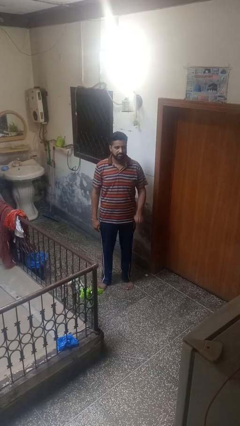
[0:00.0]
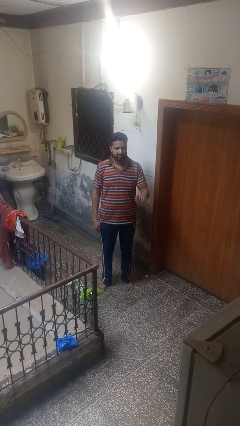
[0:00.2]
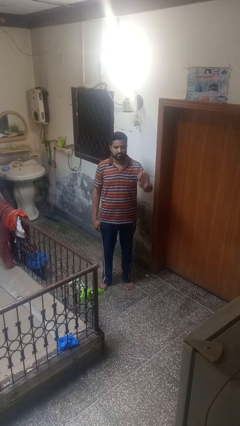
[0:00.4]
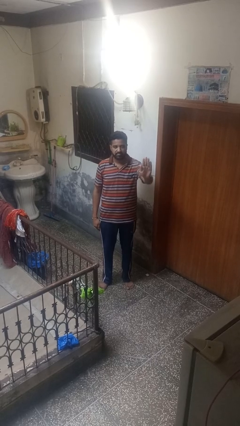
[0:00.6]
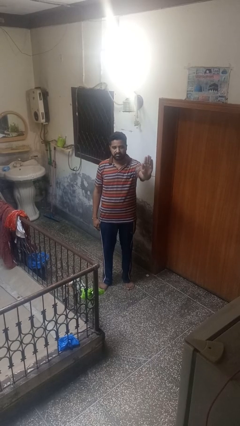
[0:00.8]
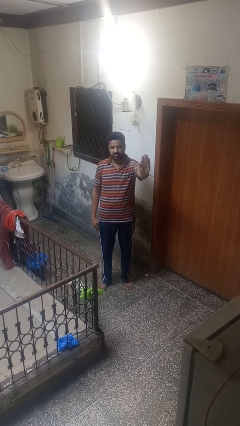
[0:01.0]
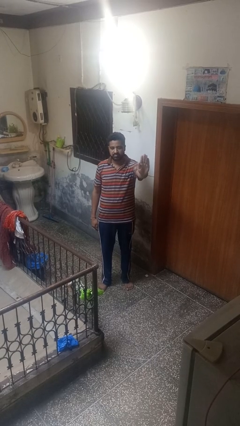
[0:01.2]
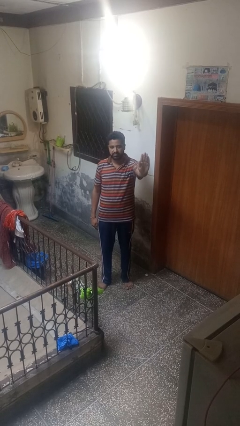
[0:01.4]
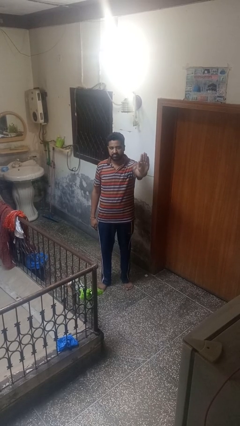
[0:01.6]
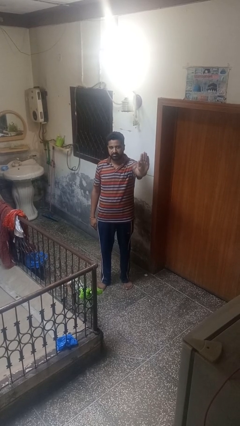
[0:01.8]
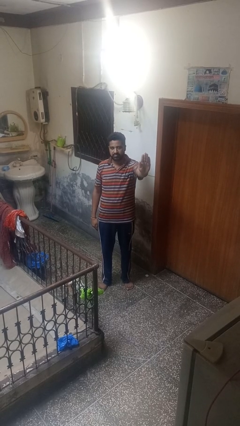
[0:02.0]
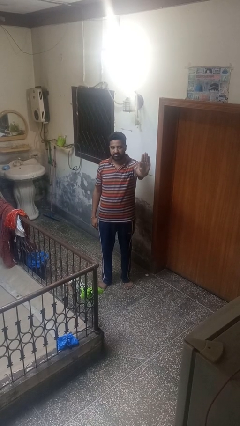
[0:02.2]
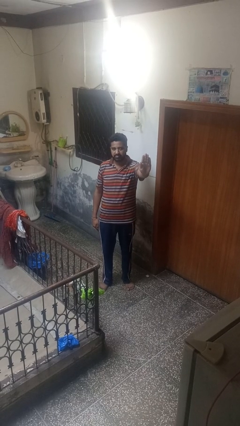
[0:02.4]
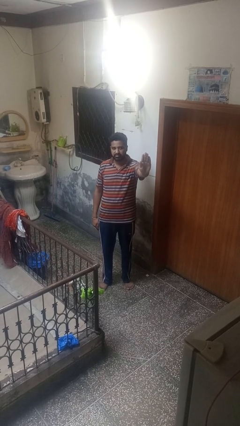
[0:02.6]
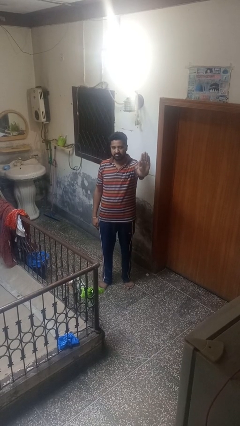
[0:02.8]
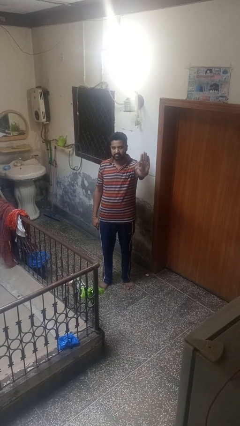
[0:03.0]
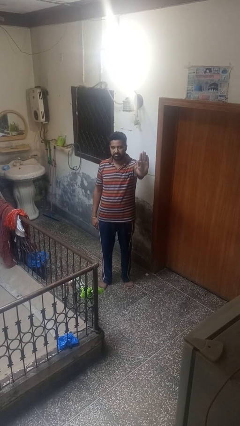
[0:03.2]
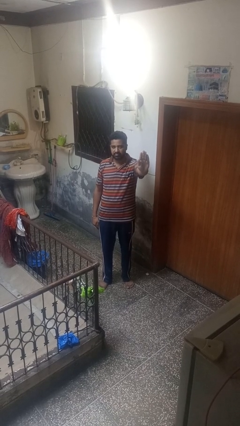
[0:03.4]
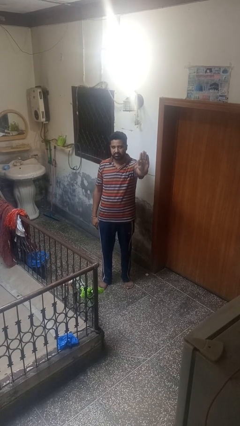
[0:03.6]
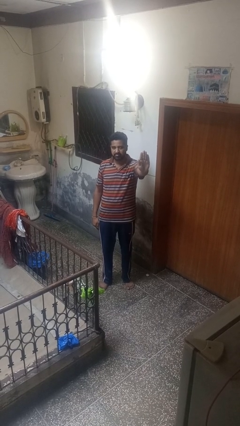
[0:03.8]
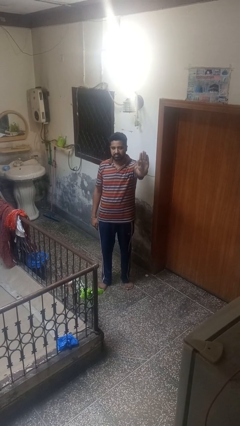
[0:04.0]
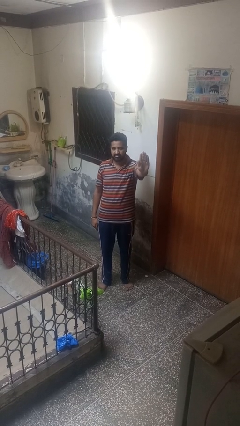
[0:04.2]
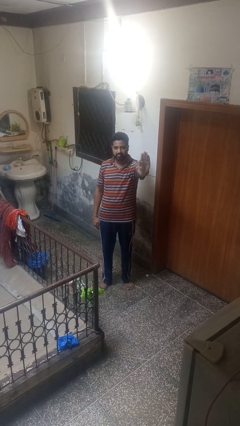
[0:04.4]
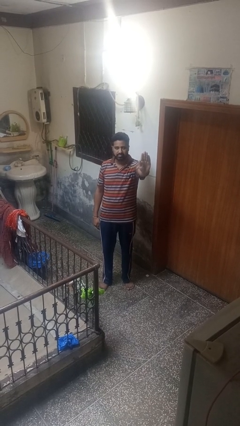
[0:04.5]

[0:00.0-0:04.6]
person gestures stop

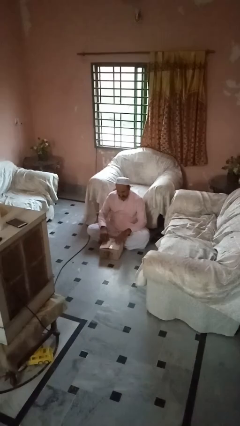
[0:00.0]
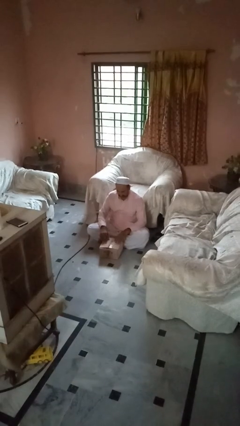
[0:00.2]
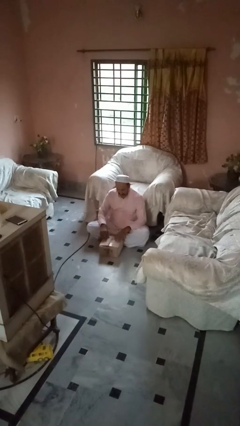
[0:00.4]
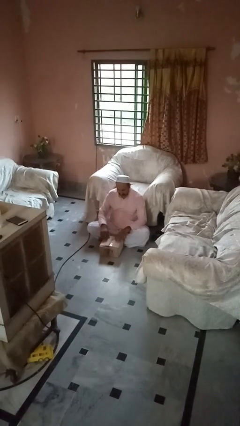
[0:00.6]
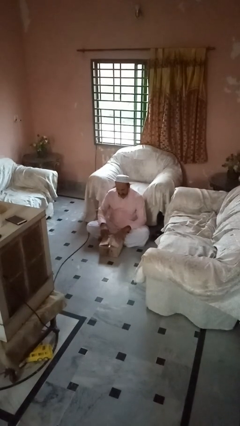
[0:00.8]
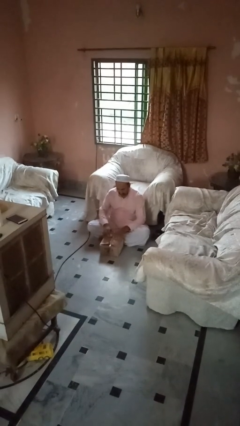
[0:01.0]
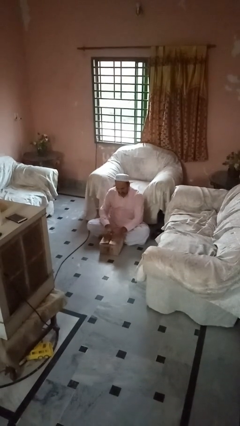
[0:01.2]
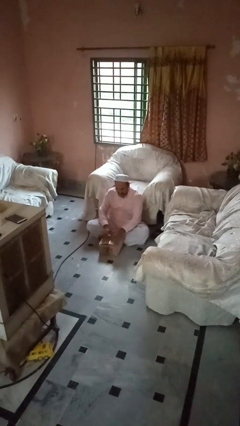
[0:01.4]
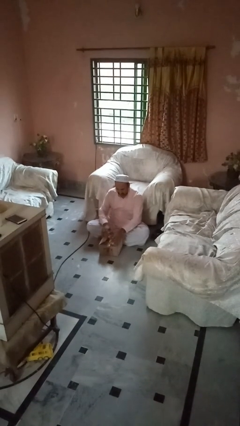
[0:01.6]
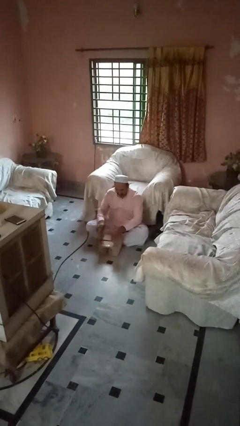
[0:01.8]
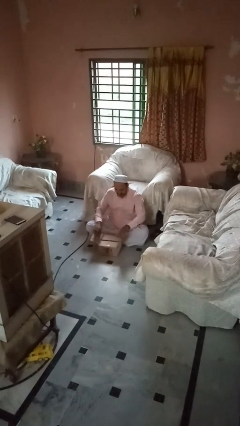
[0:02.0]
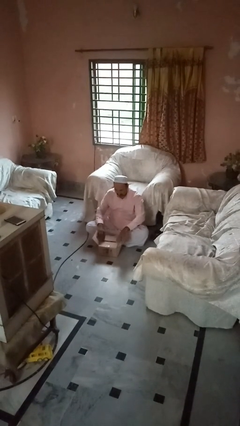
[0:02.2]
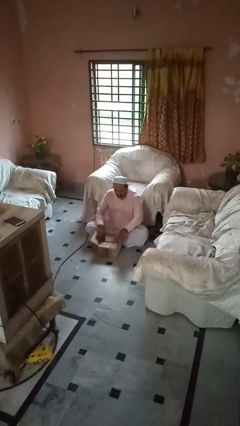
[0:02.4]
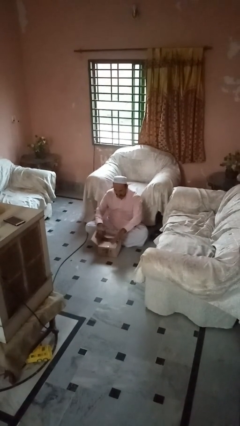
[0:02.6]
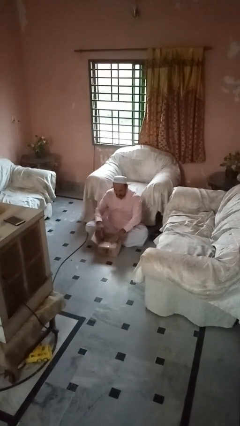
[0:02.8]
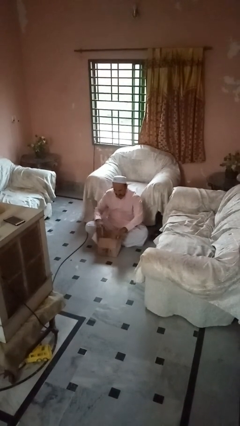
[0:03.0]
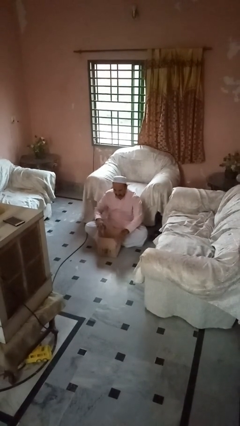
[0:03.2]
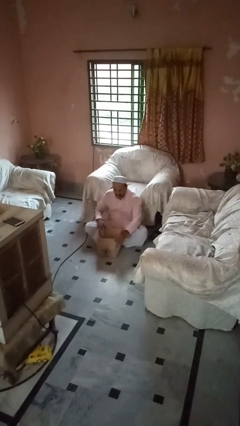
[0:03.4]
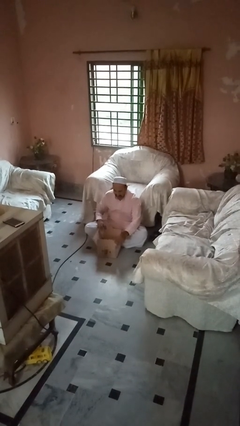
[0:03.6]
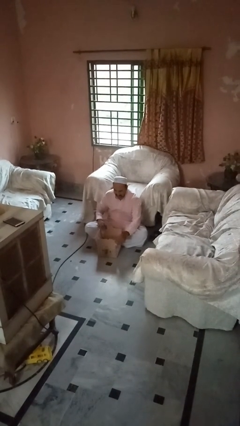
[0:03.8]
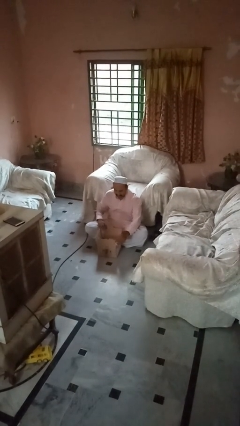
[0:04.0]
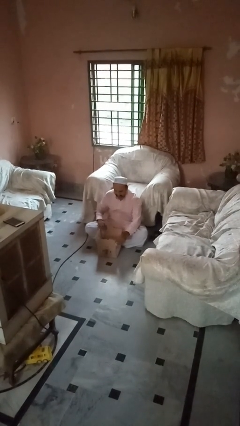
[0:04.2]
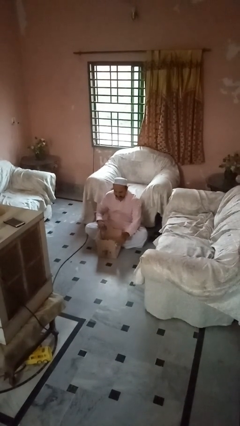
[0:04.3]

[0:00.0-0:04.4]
person opens box

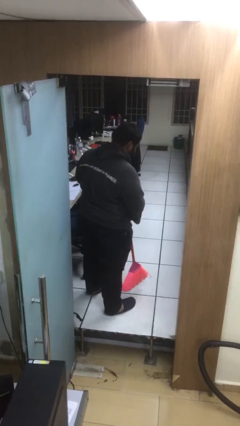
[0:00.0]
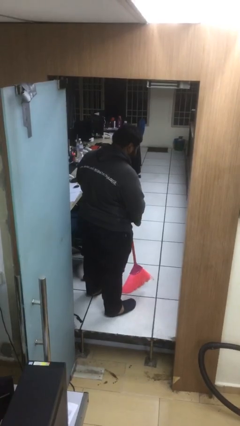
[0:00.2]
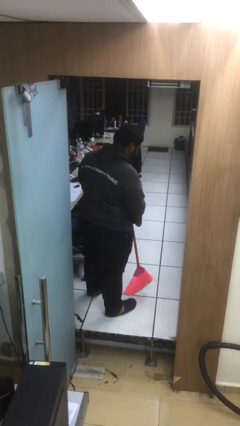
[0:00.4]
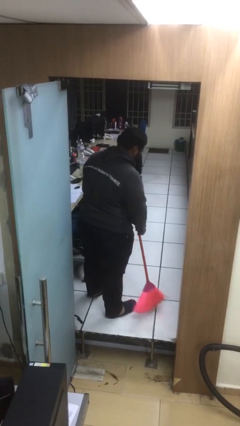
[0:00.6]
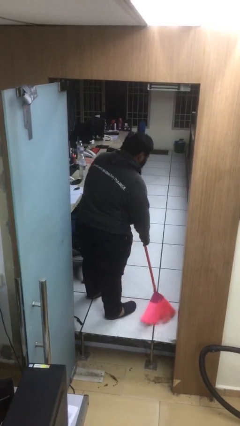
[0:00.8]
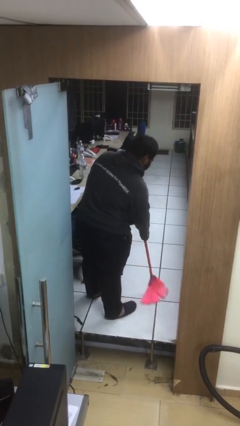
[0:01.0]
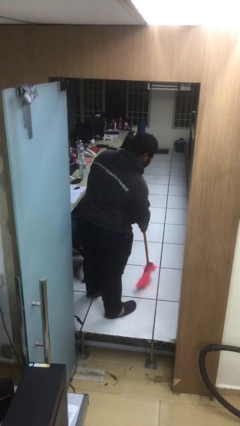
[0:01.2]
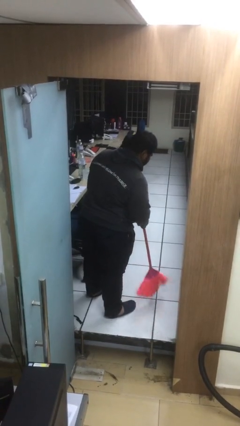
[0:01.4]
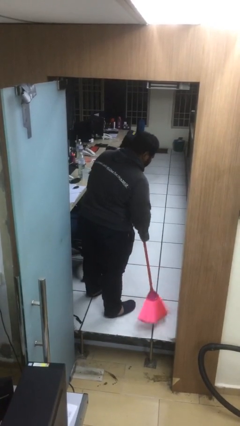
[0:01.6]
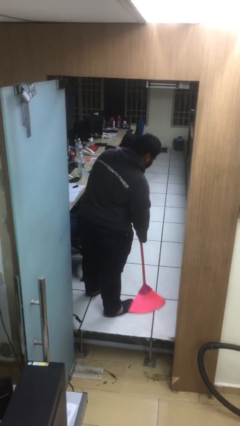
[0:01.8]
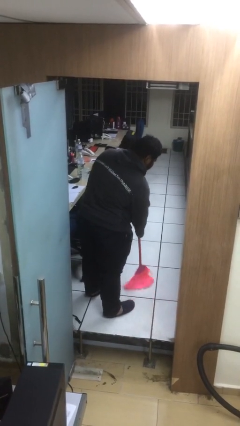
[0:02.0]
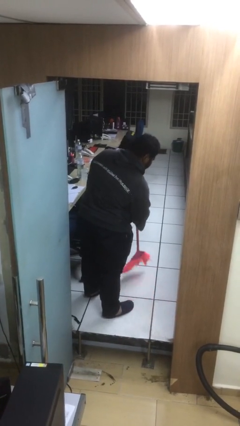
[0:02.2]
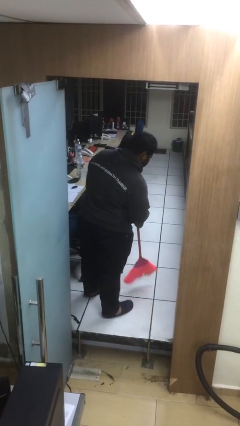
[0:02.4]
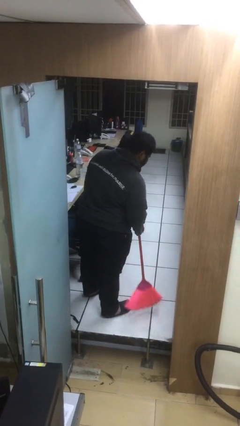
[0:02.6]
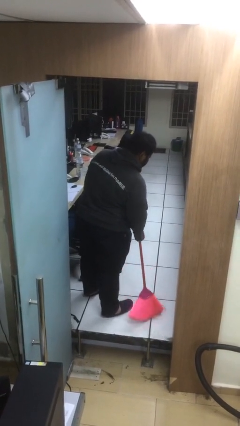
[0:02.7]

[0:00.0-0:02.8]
person sweeps floor

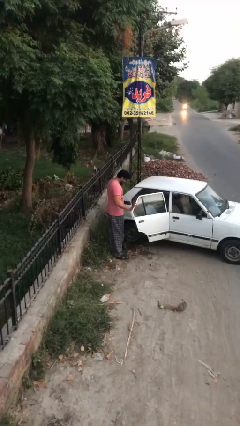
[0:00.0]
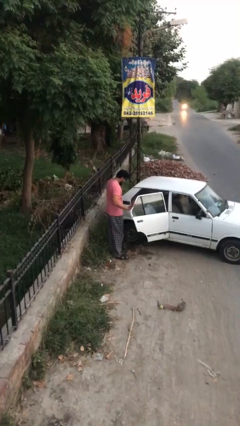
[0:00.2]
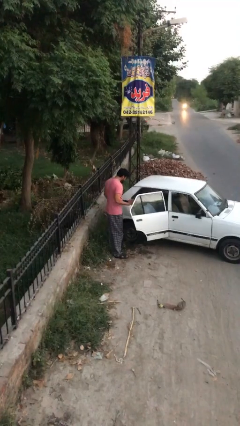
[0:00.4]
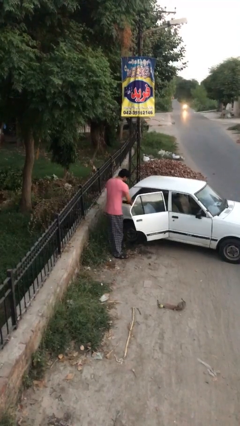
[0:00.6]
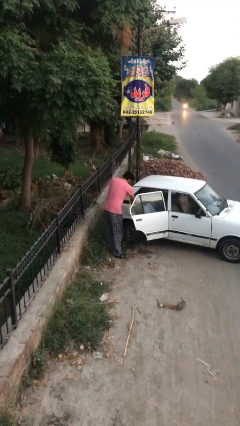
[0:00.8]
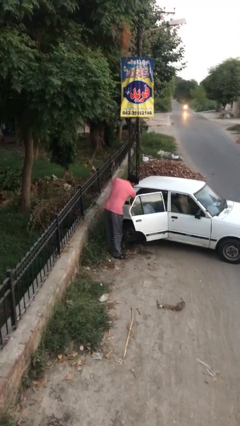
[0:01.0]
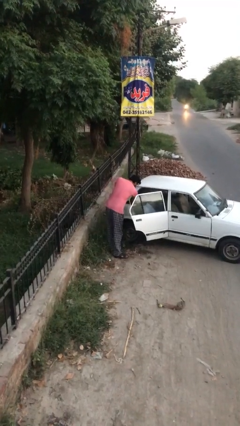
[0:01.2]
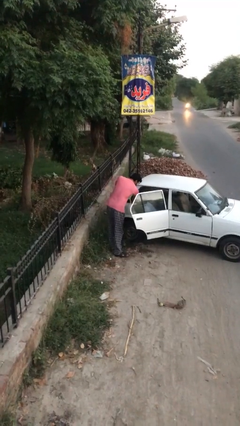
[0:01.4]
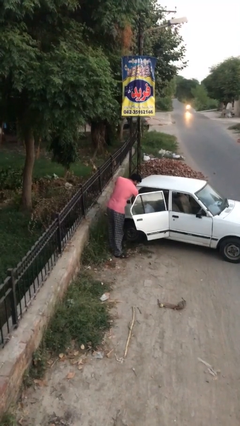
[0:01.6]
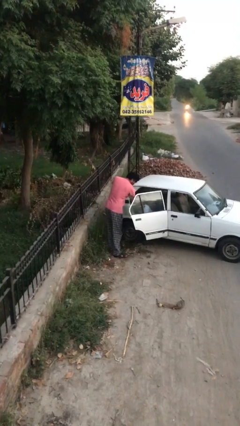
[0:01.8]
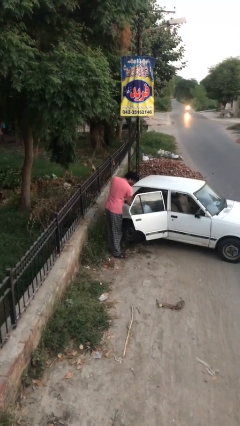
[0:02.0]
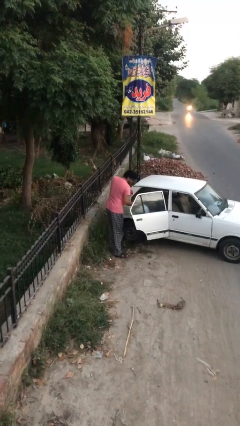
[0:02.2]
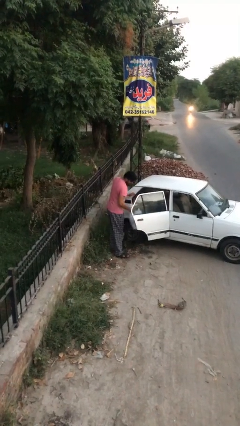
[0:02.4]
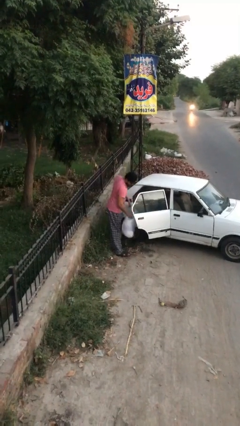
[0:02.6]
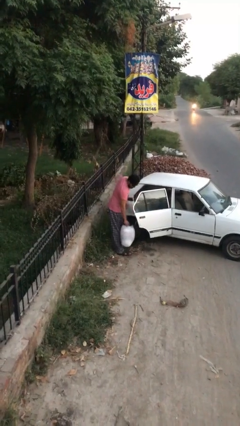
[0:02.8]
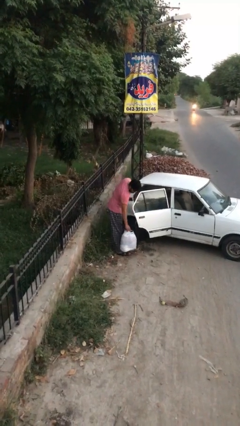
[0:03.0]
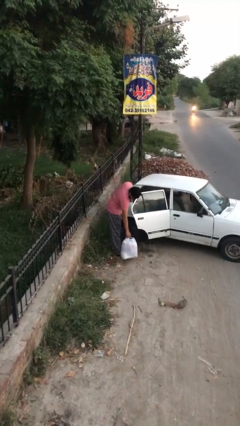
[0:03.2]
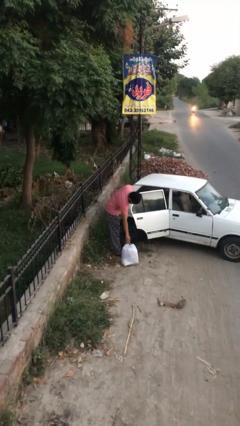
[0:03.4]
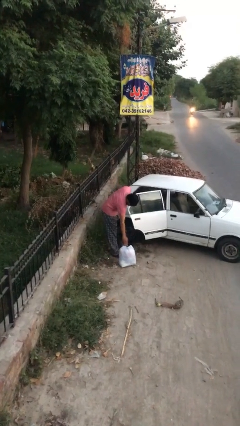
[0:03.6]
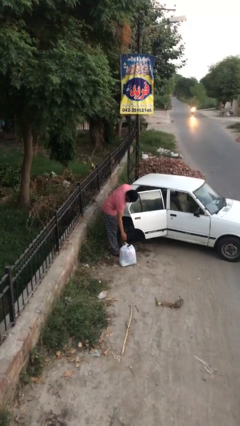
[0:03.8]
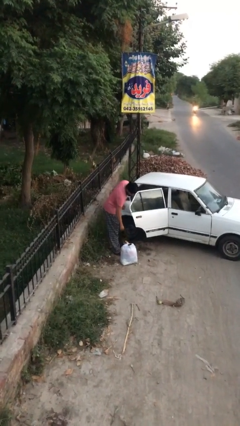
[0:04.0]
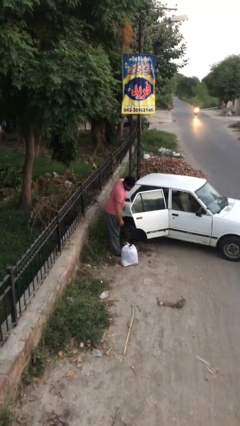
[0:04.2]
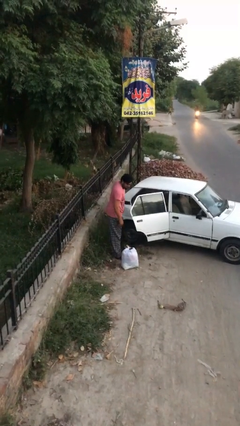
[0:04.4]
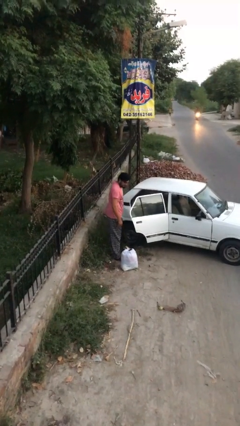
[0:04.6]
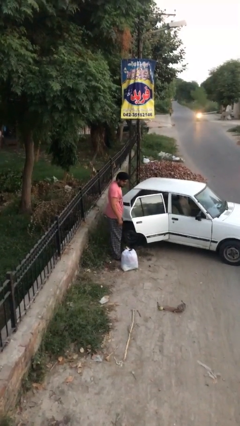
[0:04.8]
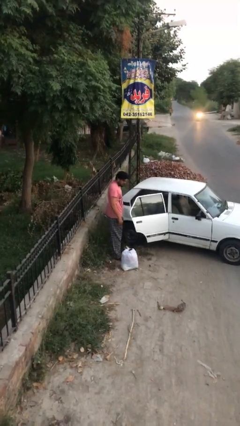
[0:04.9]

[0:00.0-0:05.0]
person unloads car

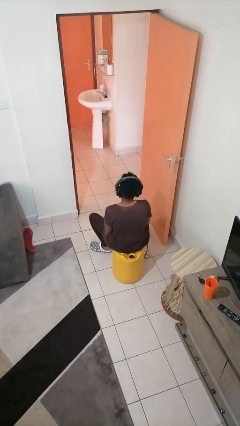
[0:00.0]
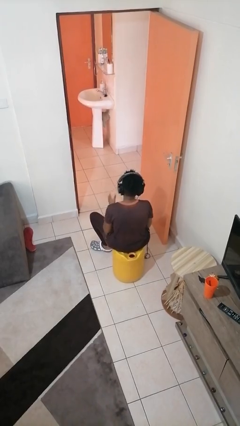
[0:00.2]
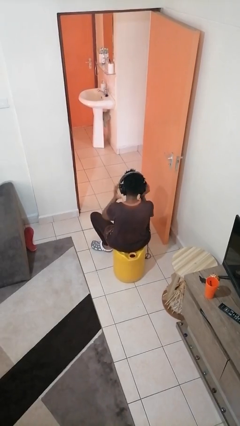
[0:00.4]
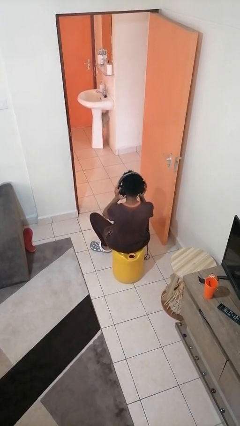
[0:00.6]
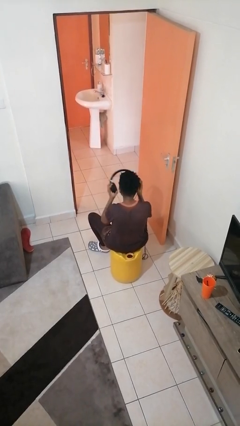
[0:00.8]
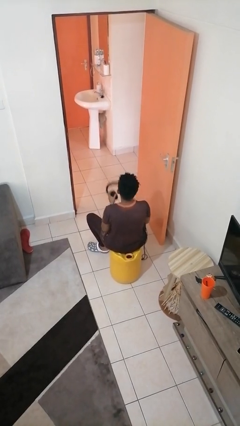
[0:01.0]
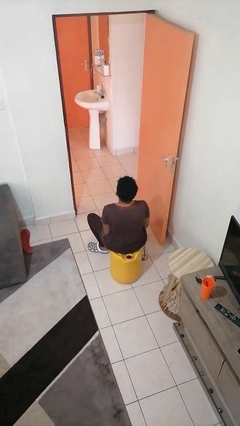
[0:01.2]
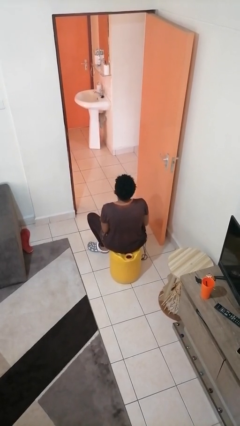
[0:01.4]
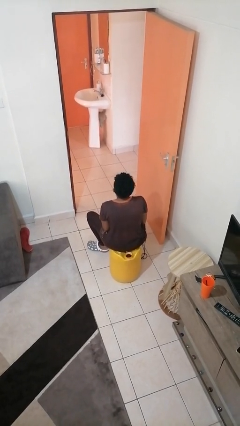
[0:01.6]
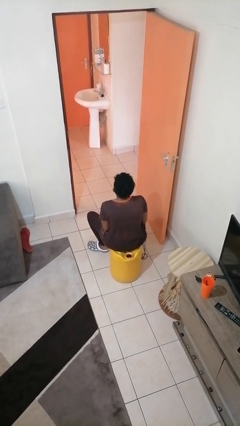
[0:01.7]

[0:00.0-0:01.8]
person takes off headphones
